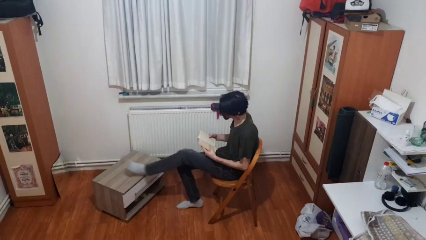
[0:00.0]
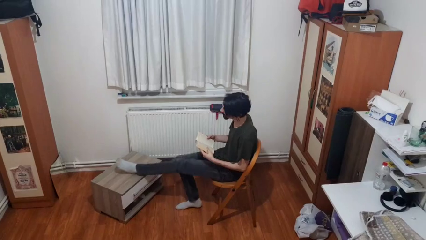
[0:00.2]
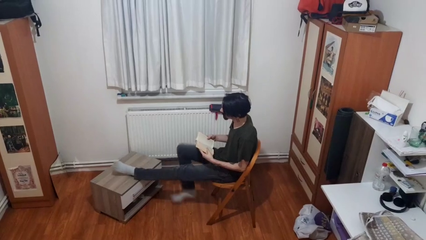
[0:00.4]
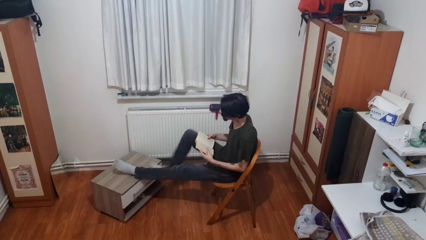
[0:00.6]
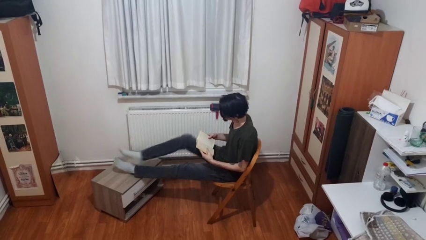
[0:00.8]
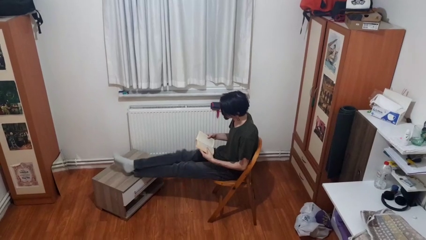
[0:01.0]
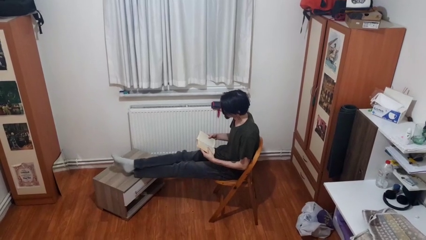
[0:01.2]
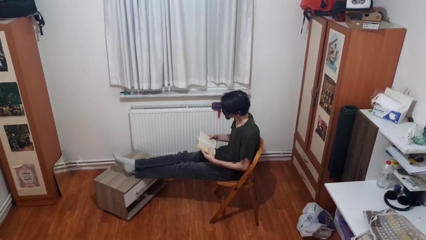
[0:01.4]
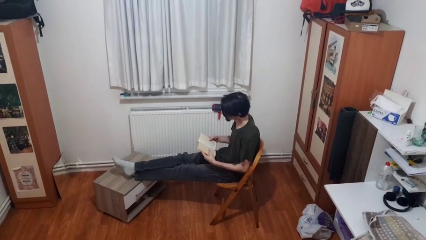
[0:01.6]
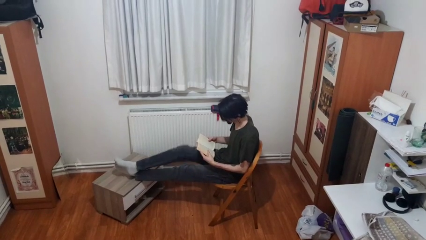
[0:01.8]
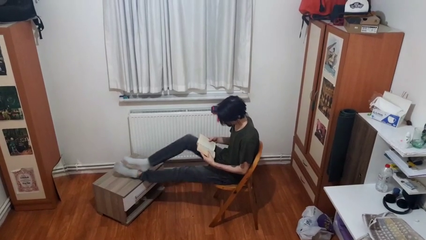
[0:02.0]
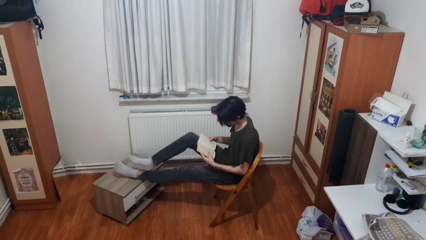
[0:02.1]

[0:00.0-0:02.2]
person puts feet up

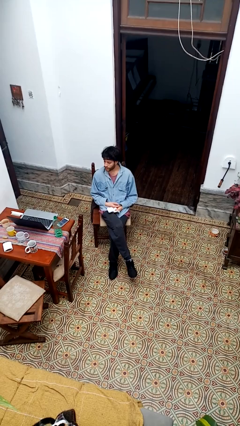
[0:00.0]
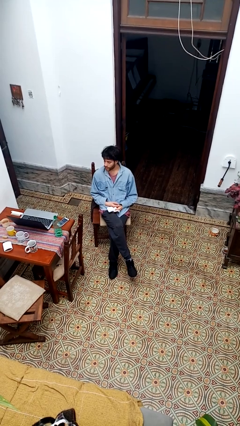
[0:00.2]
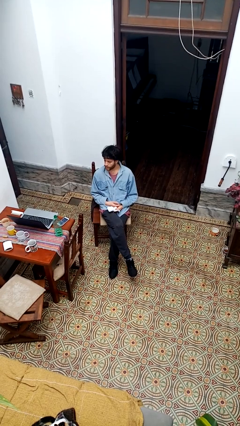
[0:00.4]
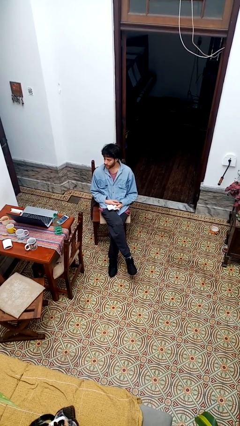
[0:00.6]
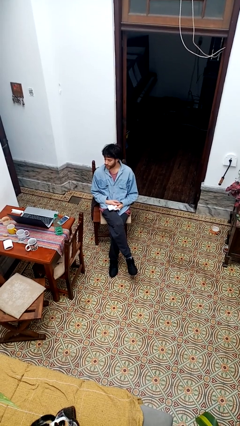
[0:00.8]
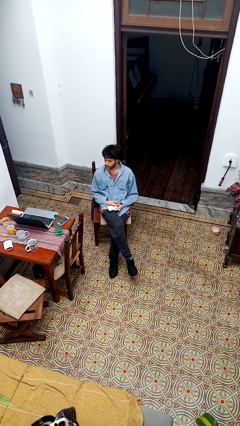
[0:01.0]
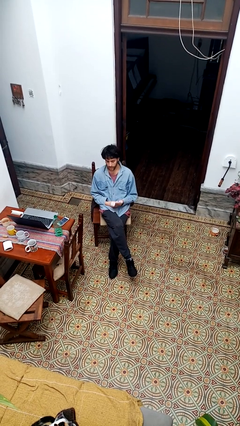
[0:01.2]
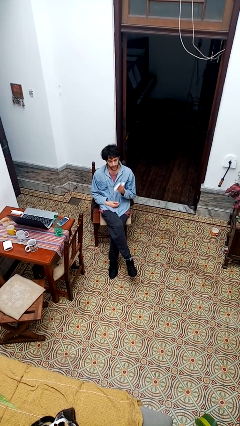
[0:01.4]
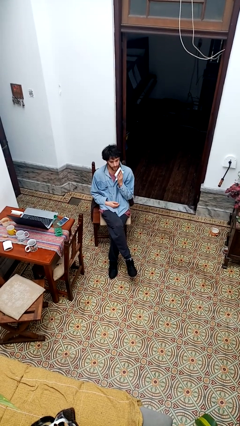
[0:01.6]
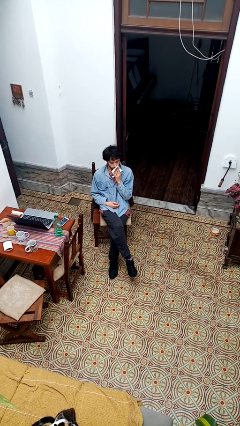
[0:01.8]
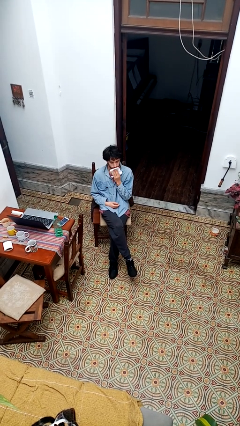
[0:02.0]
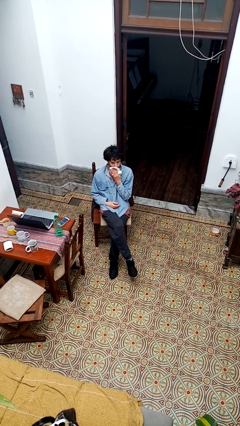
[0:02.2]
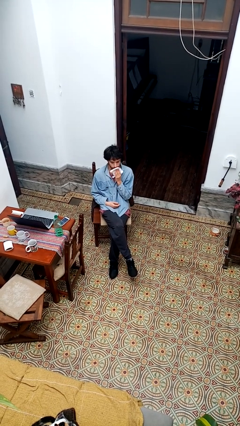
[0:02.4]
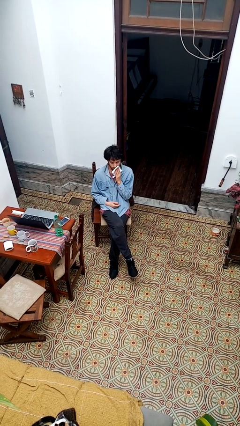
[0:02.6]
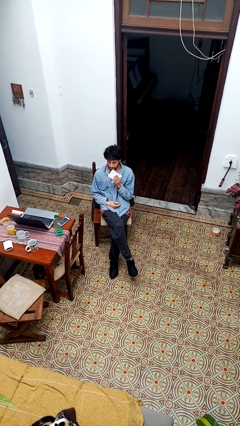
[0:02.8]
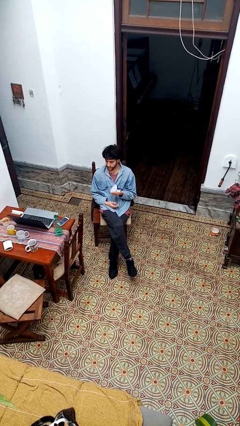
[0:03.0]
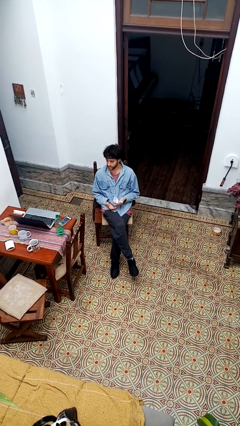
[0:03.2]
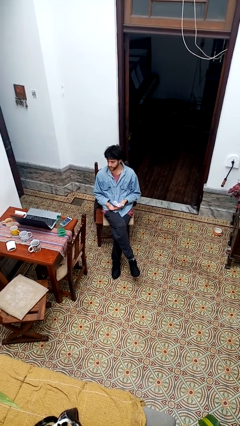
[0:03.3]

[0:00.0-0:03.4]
person wipes mouth with napkin

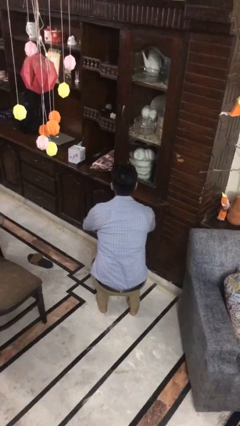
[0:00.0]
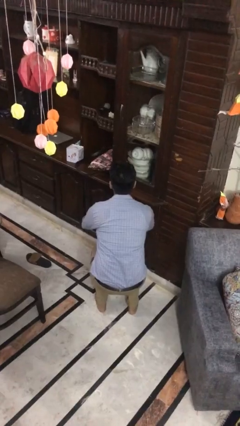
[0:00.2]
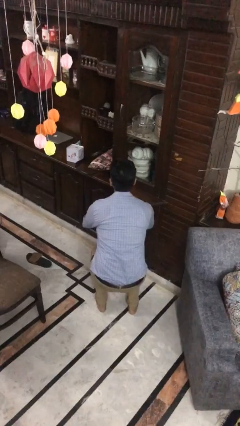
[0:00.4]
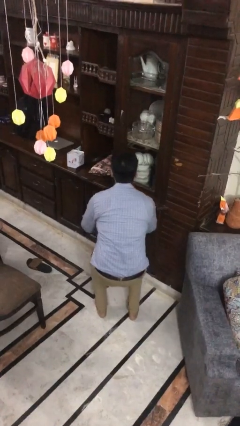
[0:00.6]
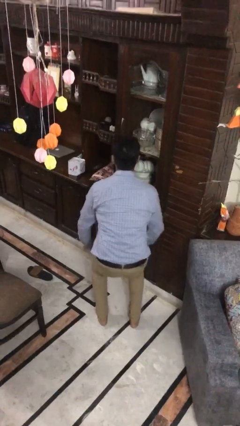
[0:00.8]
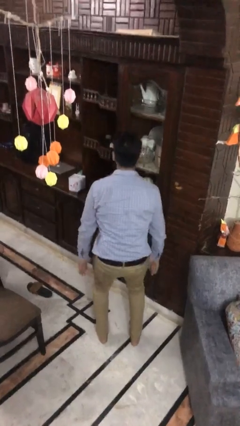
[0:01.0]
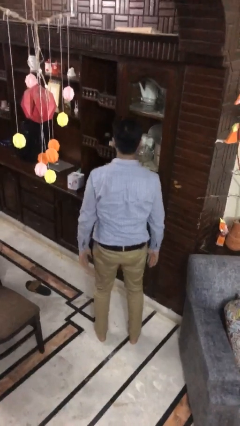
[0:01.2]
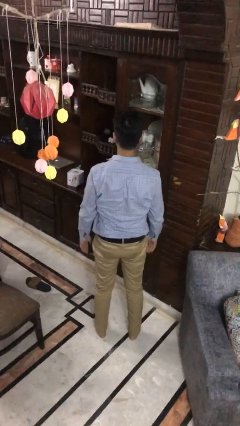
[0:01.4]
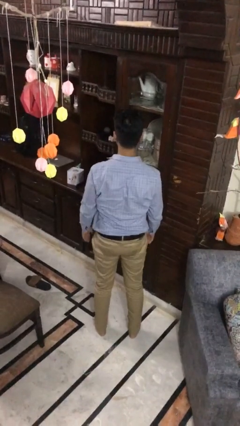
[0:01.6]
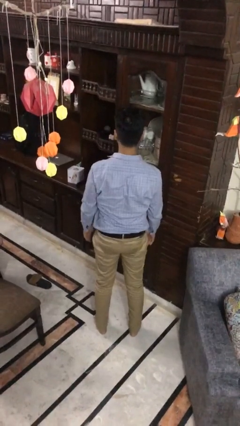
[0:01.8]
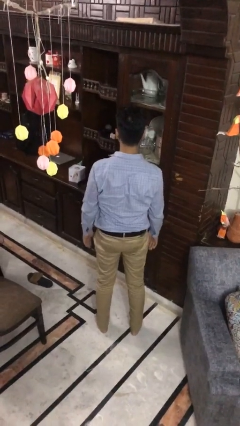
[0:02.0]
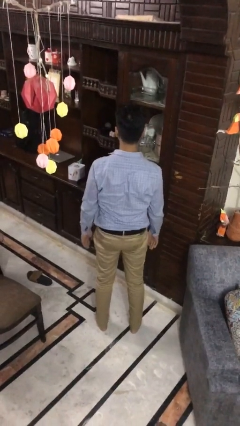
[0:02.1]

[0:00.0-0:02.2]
person stands up

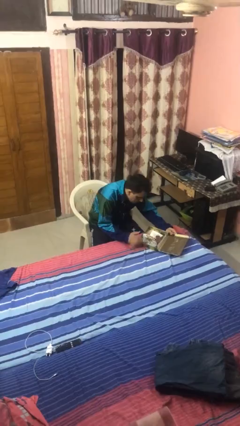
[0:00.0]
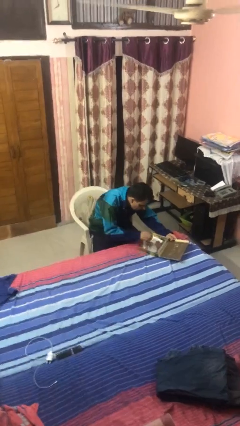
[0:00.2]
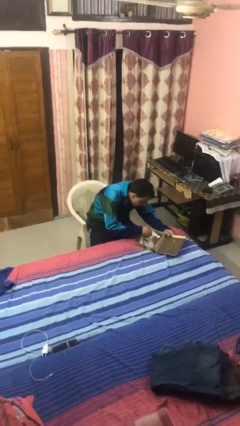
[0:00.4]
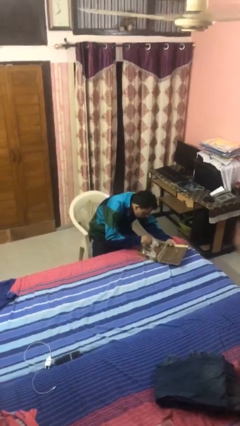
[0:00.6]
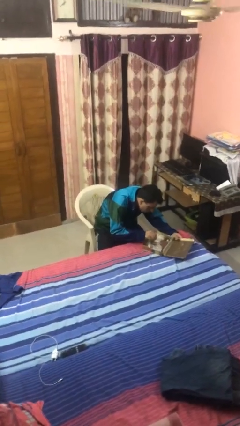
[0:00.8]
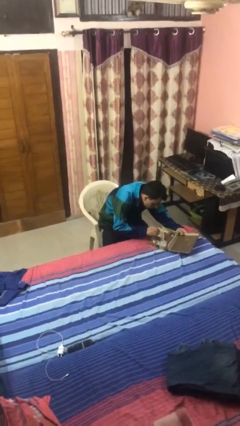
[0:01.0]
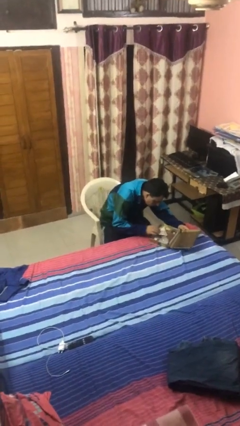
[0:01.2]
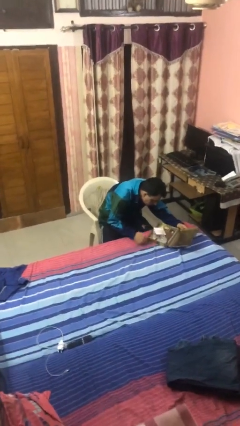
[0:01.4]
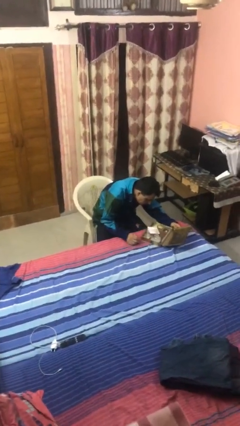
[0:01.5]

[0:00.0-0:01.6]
person searches jewelry box

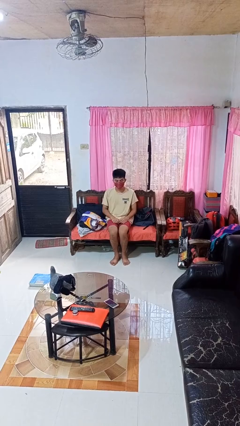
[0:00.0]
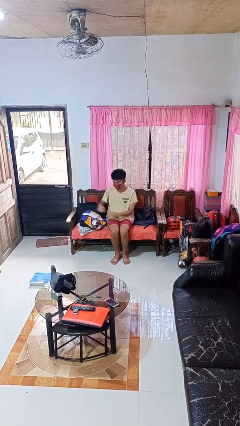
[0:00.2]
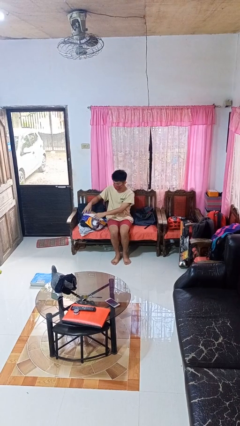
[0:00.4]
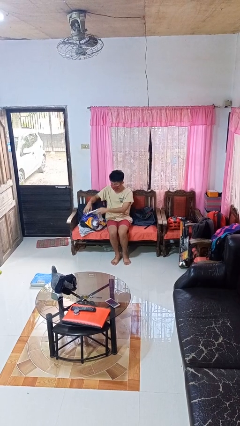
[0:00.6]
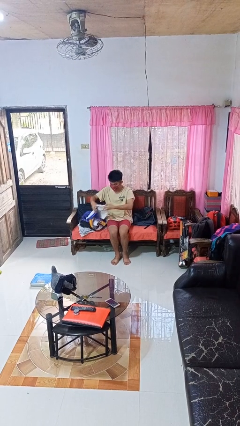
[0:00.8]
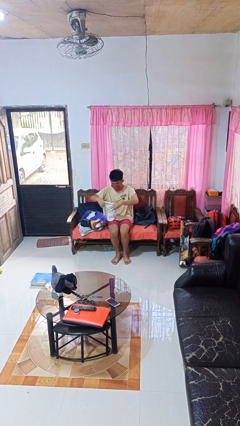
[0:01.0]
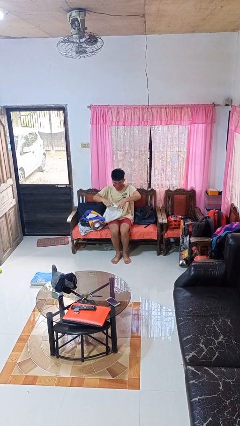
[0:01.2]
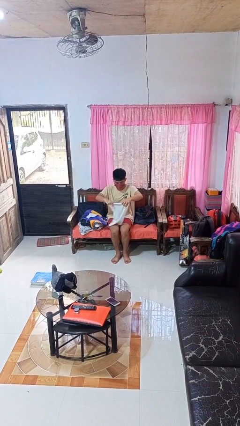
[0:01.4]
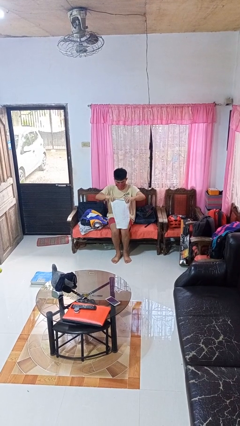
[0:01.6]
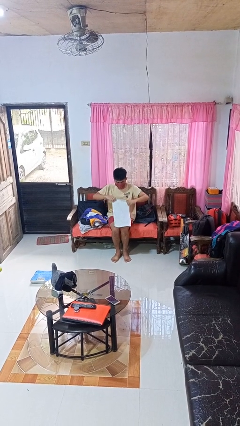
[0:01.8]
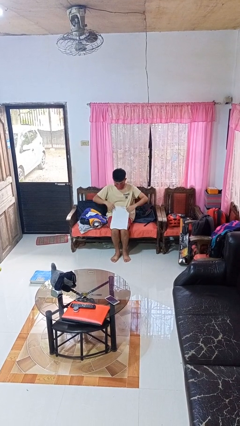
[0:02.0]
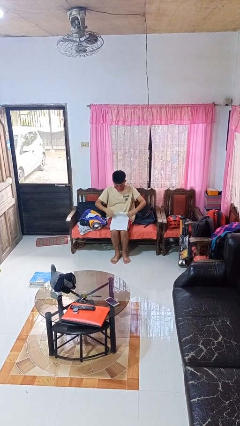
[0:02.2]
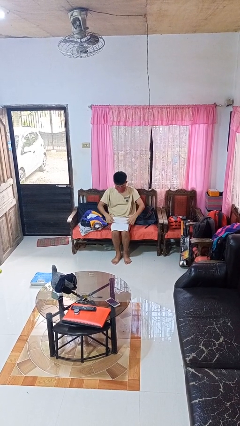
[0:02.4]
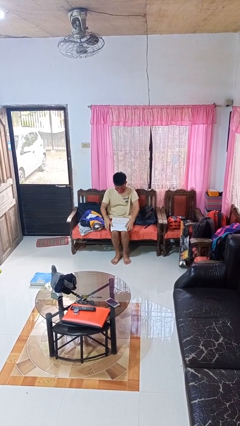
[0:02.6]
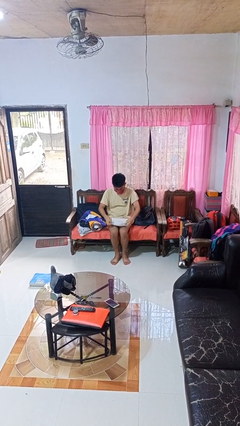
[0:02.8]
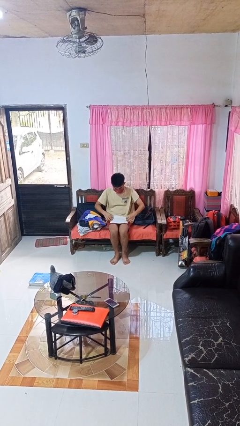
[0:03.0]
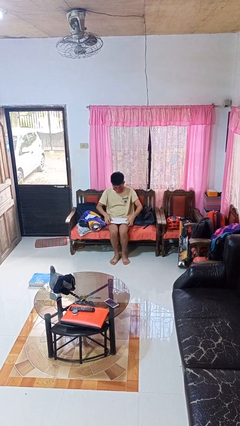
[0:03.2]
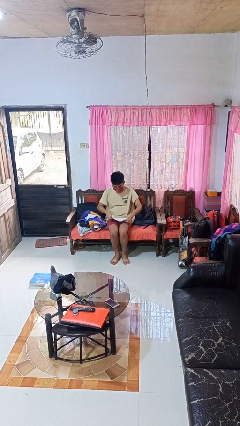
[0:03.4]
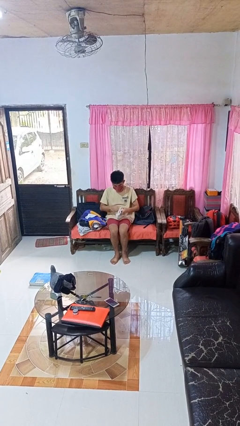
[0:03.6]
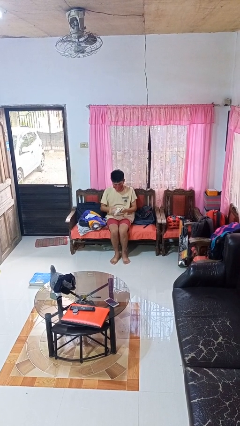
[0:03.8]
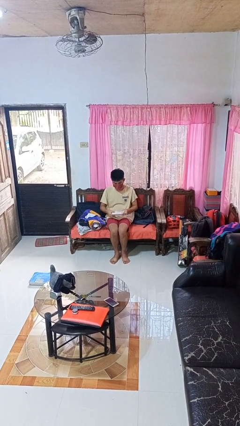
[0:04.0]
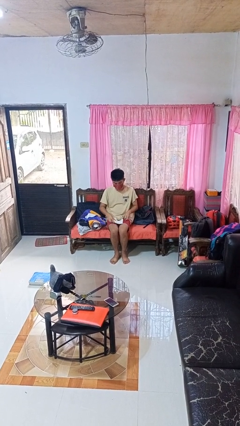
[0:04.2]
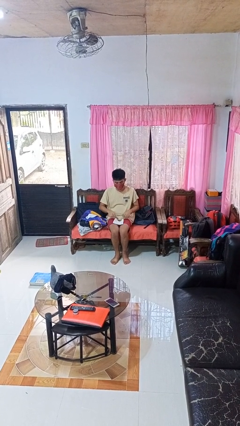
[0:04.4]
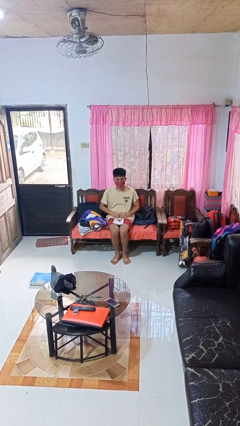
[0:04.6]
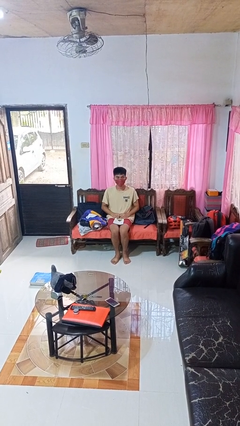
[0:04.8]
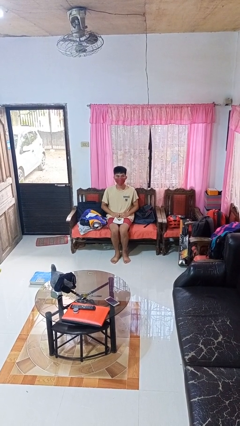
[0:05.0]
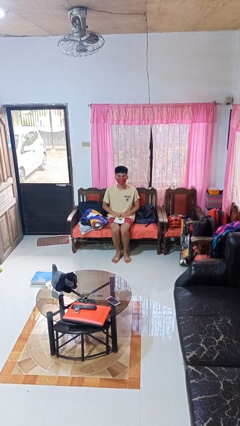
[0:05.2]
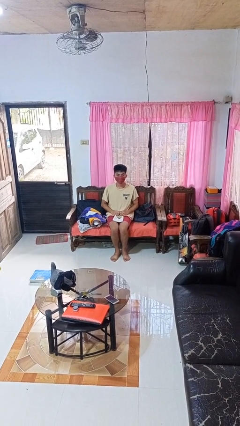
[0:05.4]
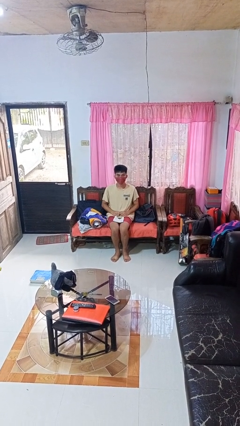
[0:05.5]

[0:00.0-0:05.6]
person folds towel

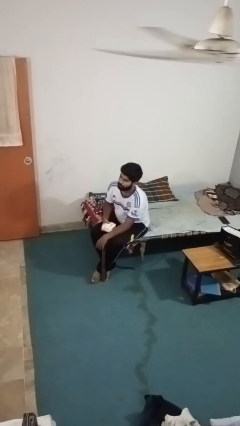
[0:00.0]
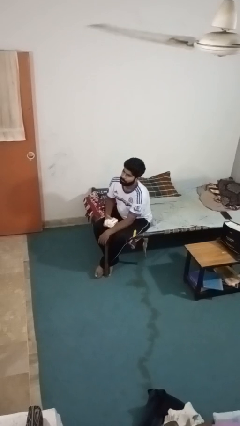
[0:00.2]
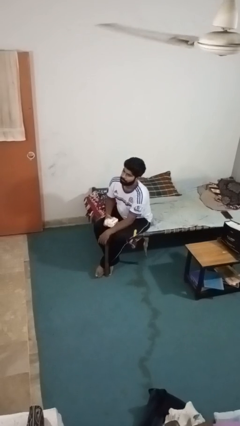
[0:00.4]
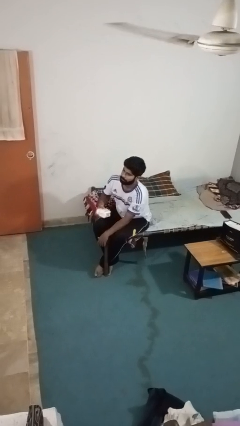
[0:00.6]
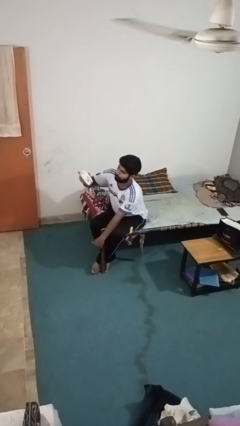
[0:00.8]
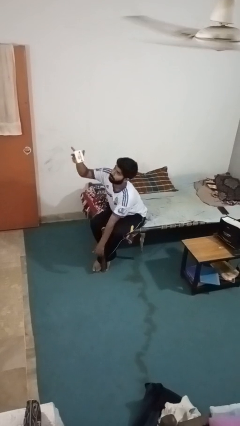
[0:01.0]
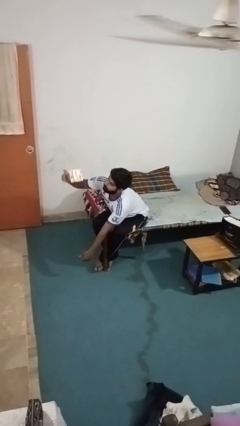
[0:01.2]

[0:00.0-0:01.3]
person drops object

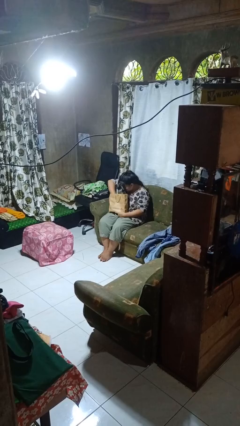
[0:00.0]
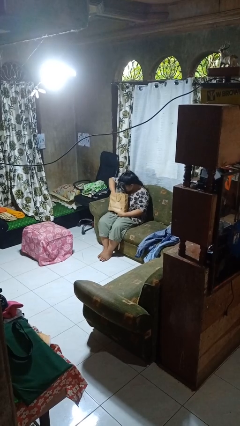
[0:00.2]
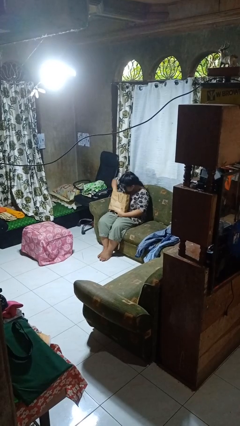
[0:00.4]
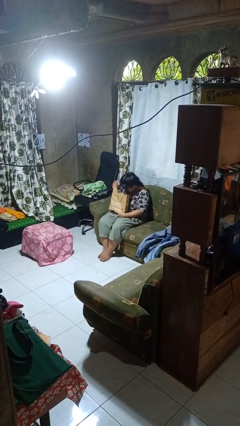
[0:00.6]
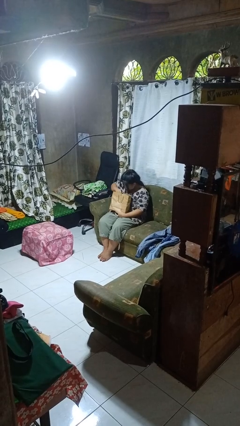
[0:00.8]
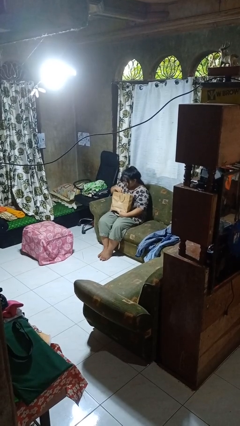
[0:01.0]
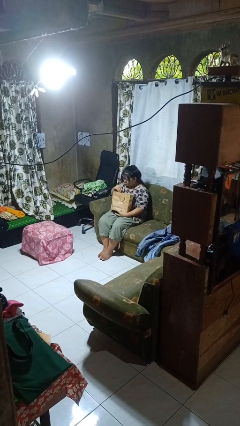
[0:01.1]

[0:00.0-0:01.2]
person searches in bag
